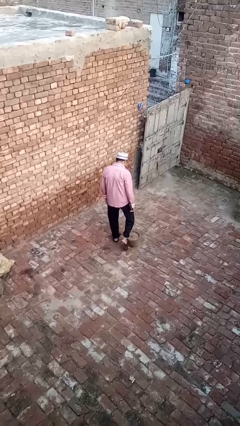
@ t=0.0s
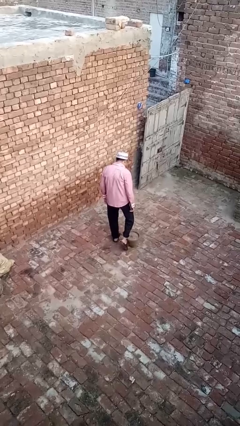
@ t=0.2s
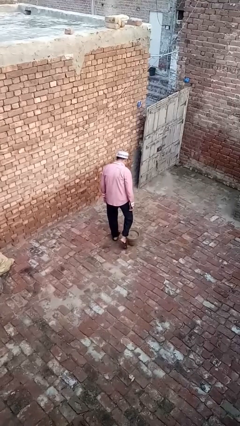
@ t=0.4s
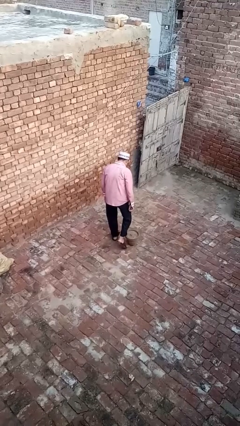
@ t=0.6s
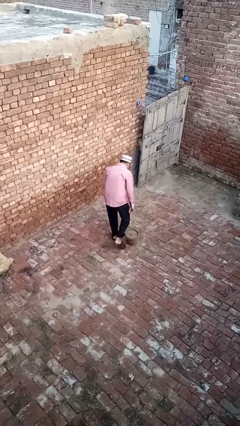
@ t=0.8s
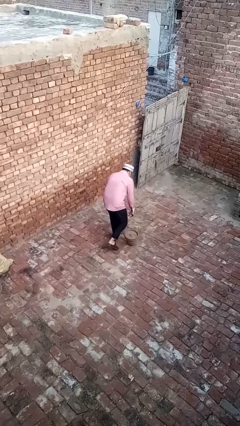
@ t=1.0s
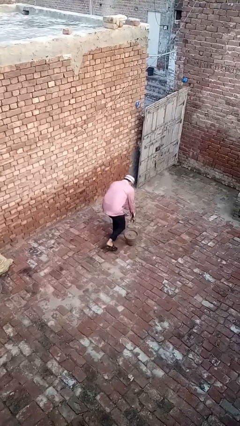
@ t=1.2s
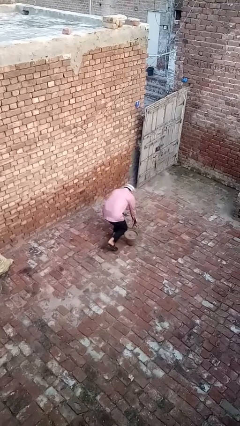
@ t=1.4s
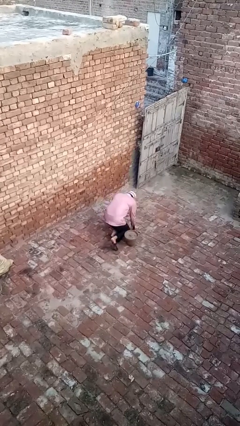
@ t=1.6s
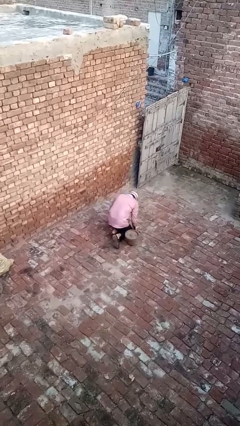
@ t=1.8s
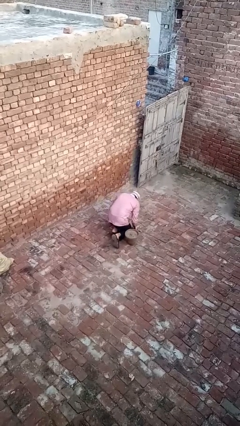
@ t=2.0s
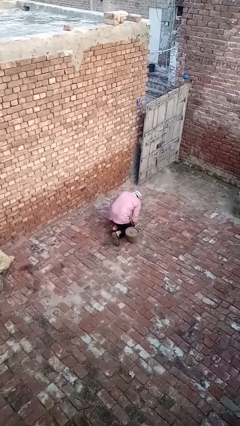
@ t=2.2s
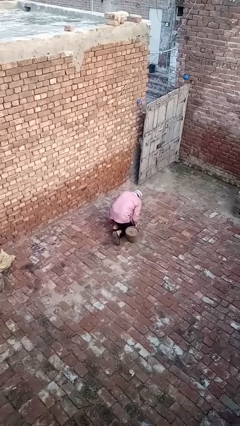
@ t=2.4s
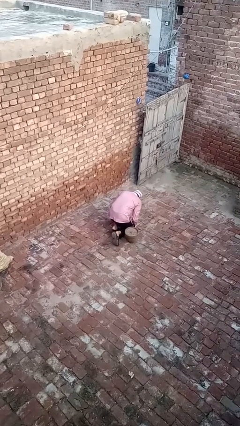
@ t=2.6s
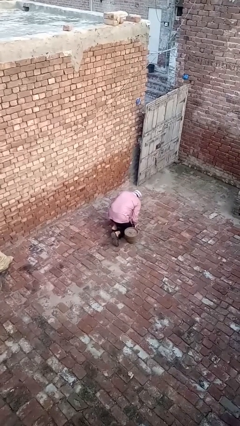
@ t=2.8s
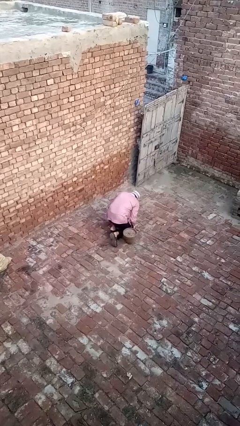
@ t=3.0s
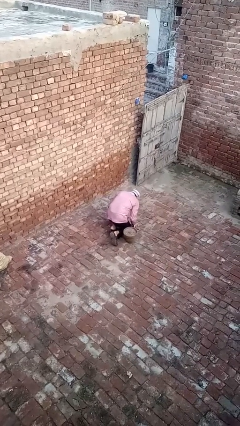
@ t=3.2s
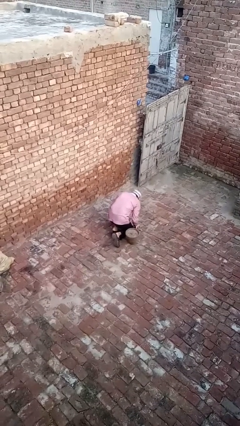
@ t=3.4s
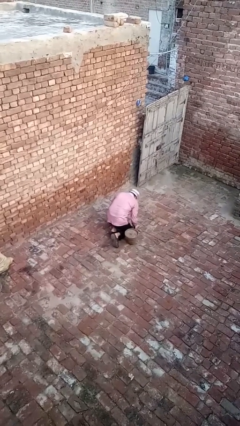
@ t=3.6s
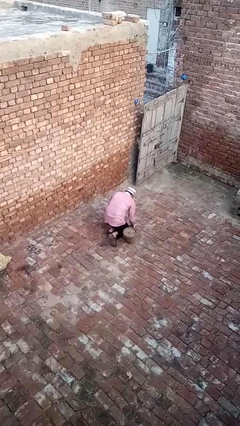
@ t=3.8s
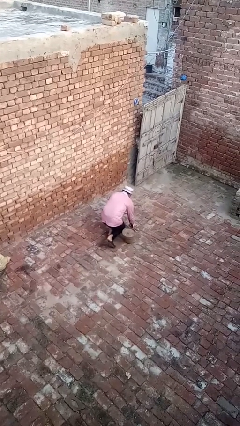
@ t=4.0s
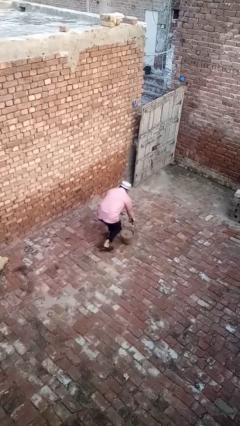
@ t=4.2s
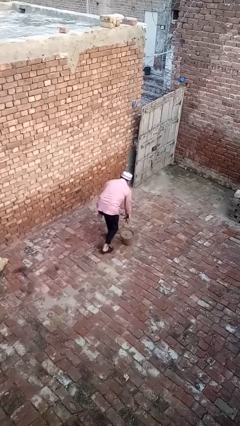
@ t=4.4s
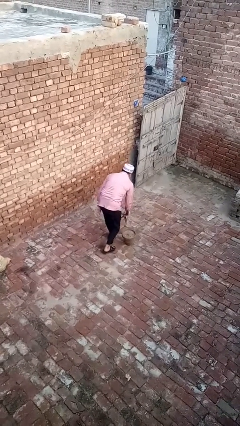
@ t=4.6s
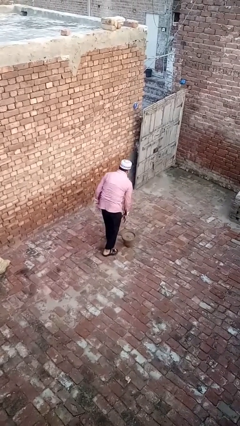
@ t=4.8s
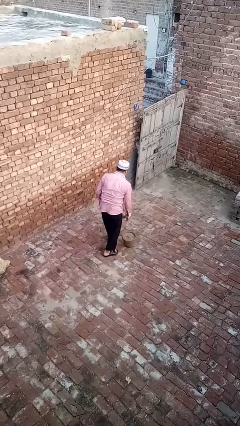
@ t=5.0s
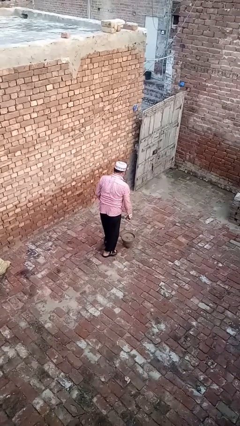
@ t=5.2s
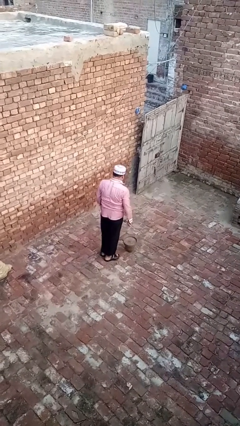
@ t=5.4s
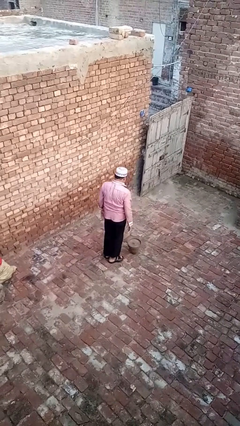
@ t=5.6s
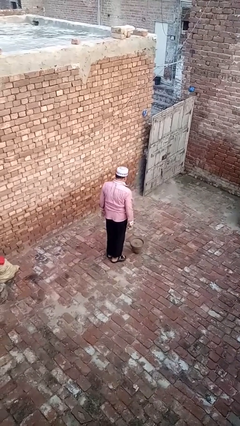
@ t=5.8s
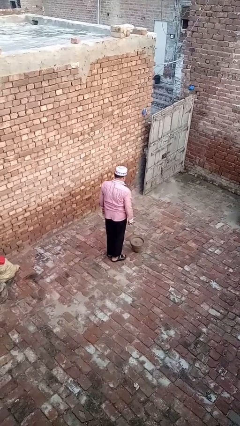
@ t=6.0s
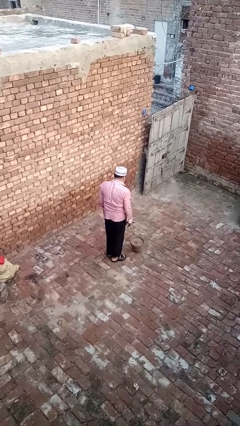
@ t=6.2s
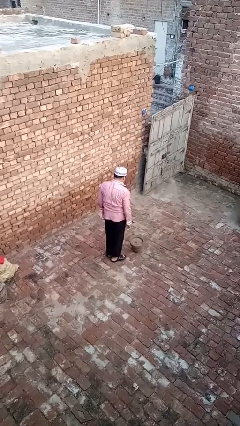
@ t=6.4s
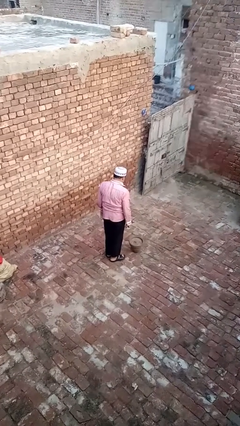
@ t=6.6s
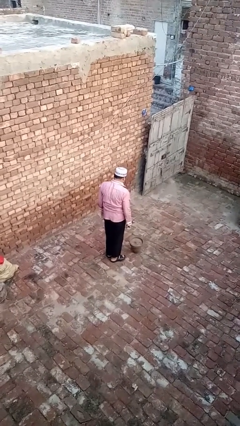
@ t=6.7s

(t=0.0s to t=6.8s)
person lies down on floor

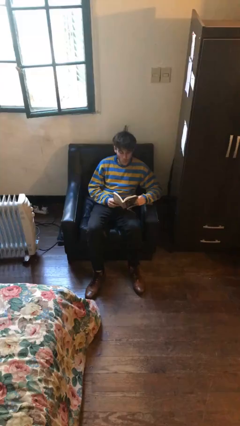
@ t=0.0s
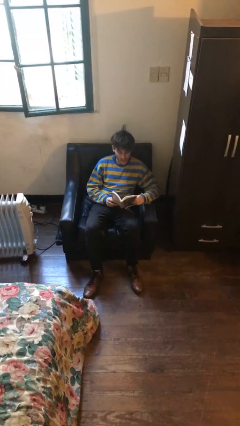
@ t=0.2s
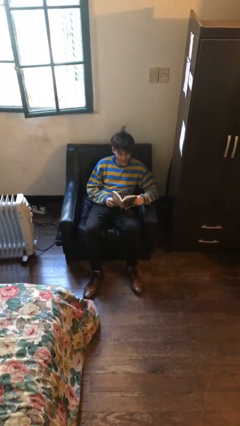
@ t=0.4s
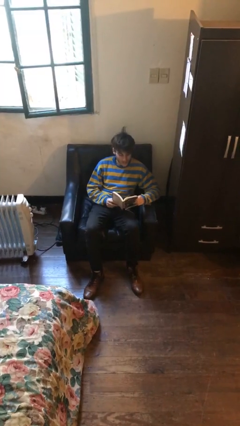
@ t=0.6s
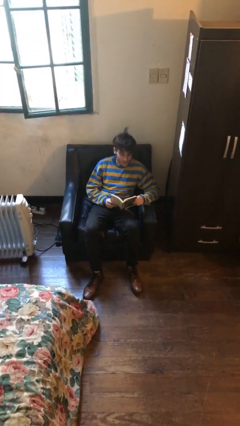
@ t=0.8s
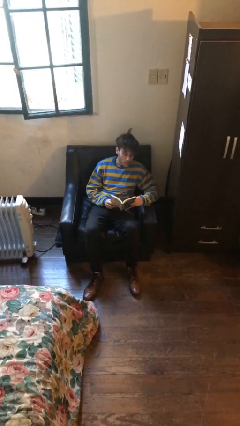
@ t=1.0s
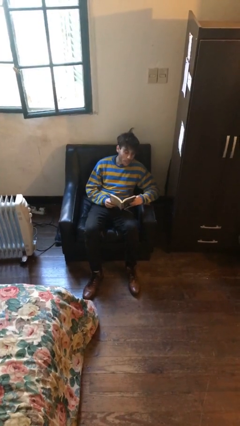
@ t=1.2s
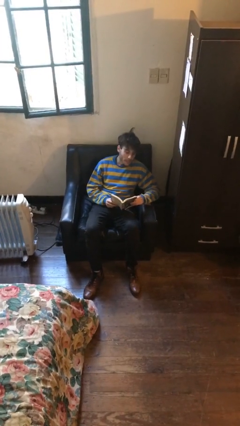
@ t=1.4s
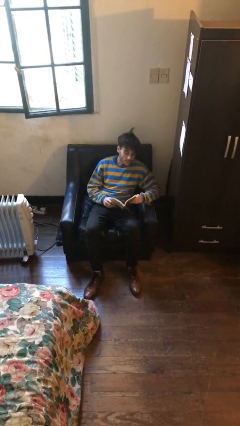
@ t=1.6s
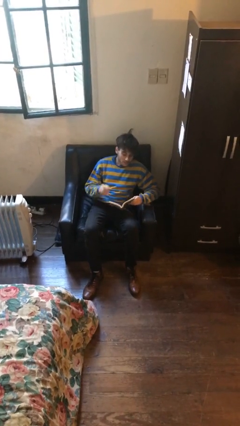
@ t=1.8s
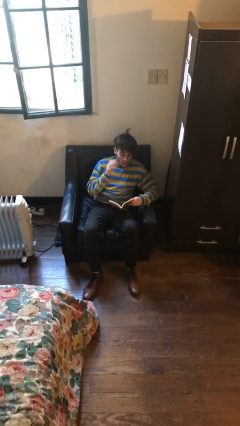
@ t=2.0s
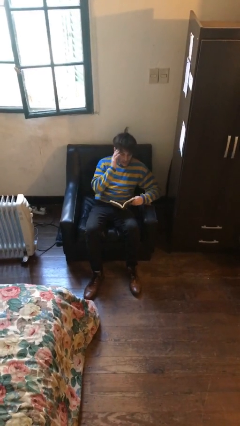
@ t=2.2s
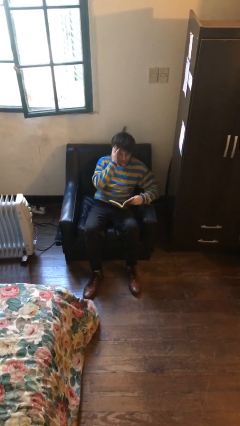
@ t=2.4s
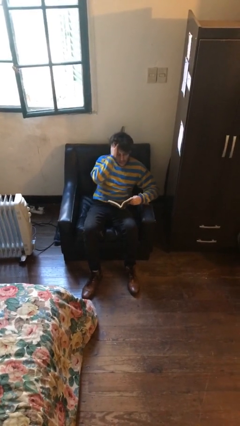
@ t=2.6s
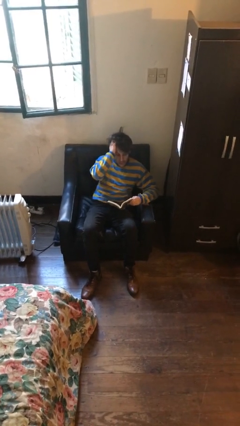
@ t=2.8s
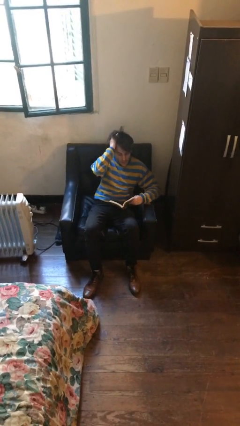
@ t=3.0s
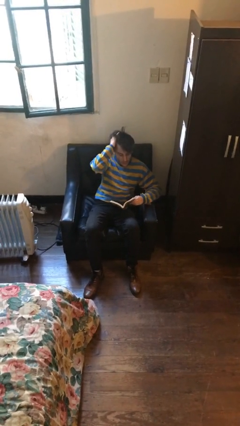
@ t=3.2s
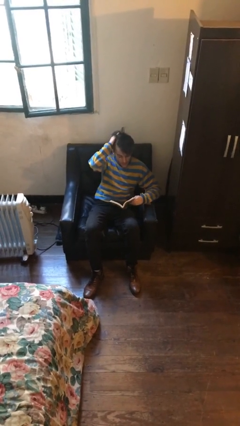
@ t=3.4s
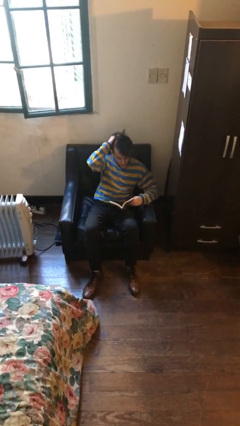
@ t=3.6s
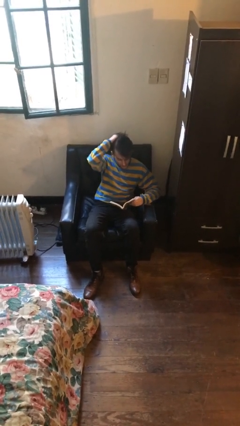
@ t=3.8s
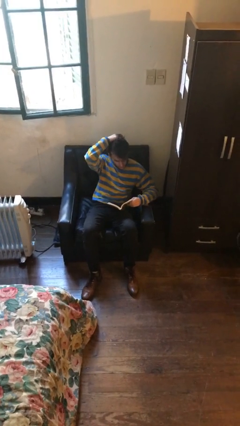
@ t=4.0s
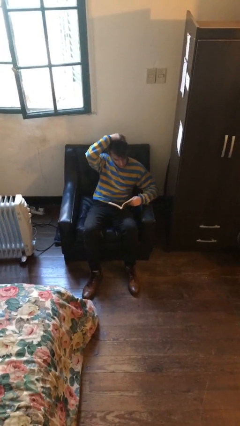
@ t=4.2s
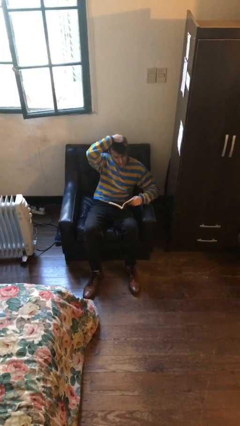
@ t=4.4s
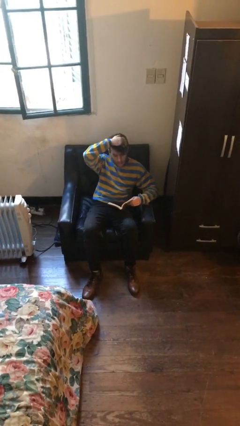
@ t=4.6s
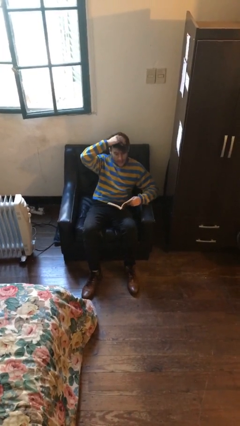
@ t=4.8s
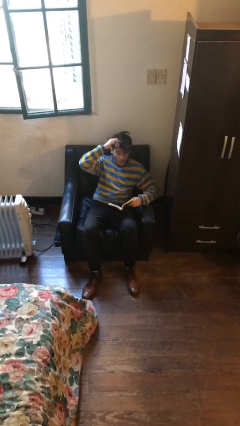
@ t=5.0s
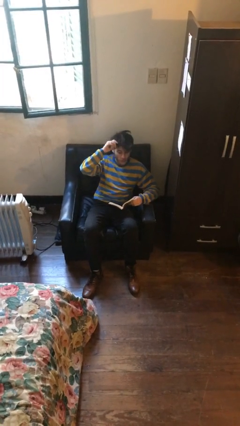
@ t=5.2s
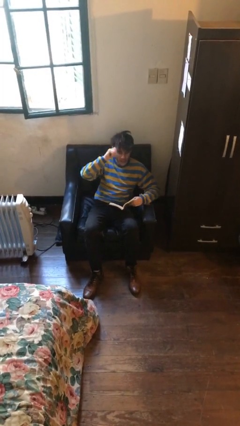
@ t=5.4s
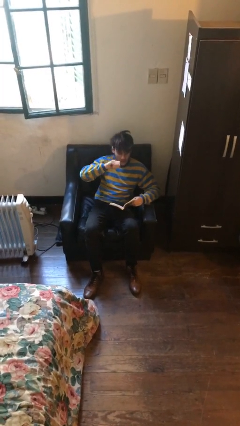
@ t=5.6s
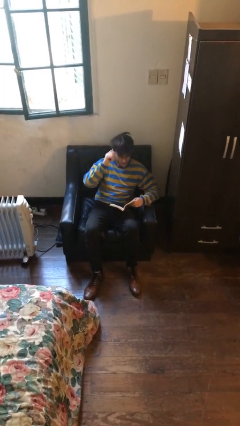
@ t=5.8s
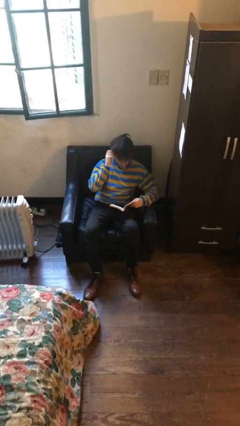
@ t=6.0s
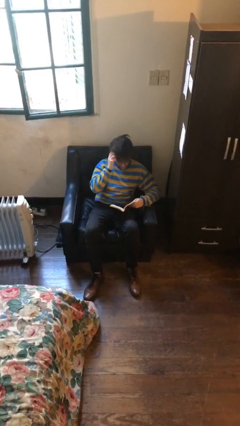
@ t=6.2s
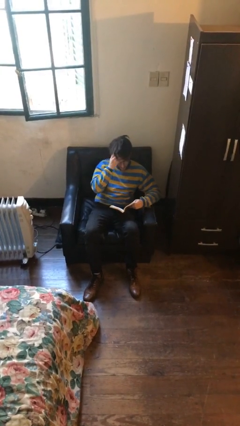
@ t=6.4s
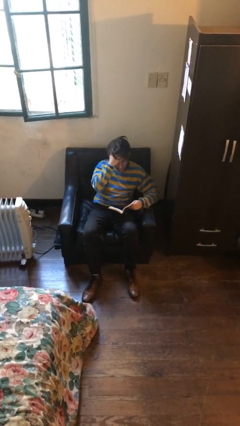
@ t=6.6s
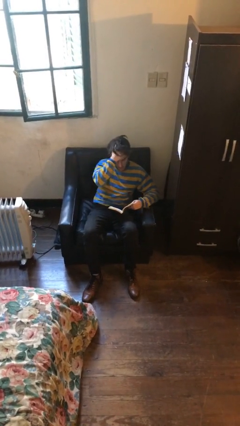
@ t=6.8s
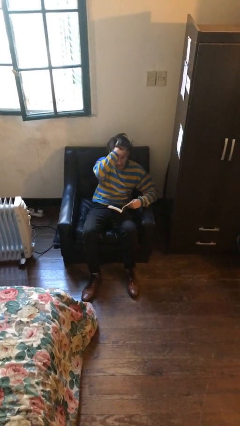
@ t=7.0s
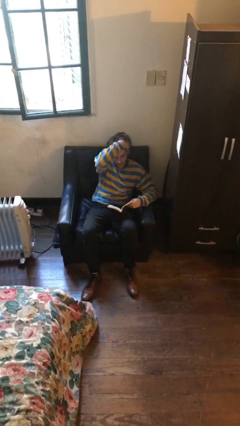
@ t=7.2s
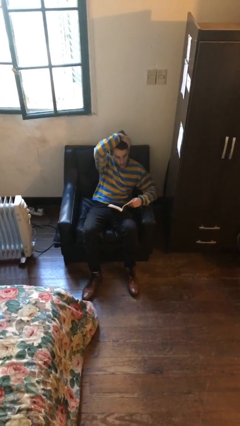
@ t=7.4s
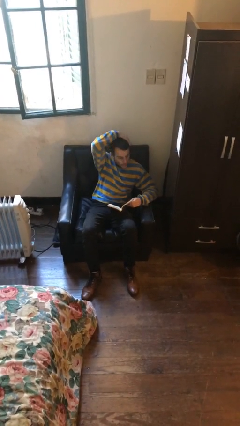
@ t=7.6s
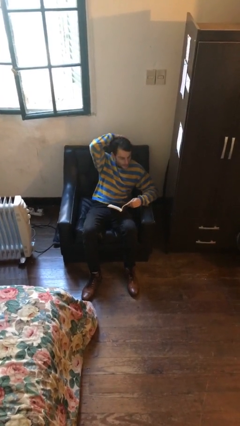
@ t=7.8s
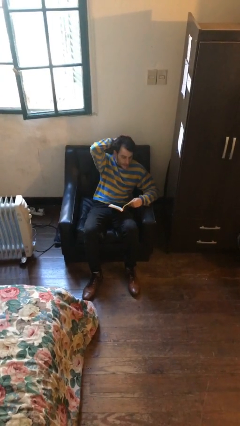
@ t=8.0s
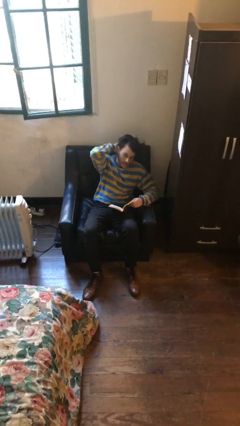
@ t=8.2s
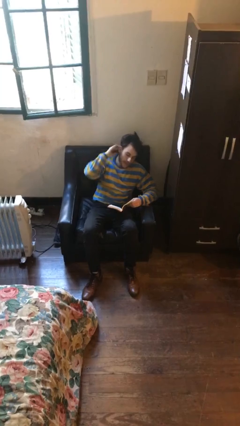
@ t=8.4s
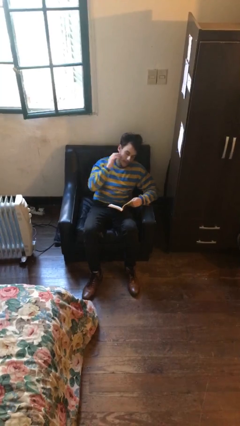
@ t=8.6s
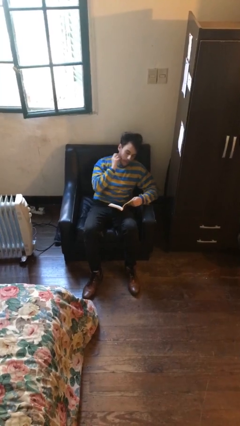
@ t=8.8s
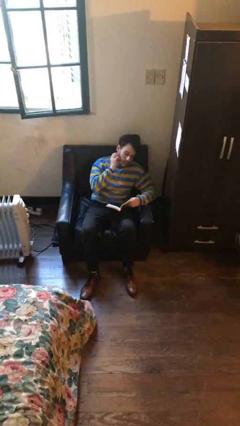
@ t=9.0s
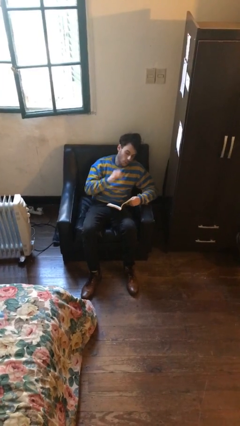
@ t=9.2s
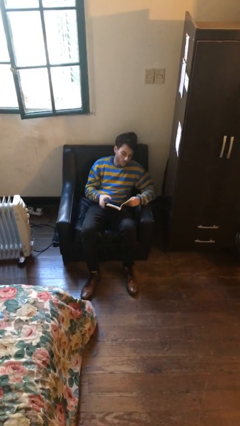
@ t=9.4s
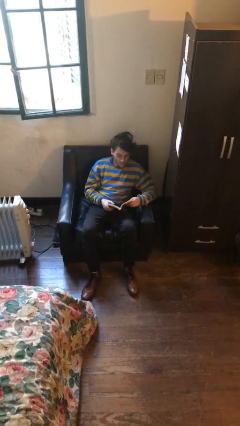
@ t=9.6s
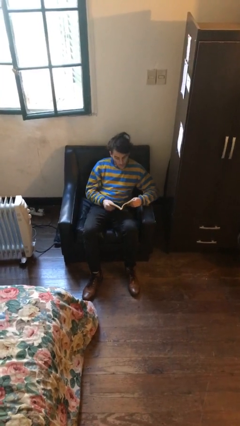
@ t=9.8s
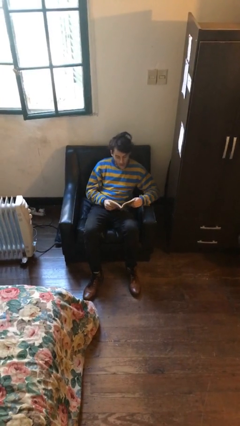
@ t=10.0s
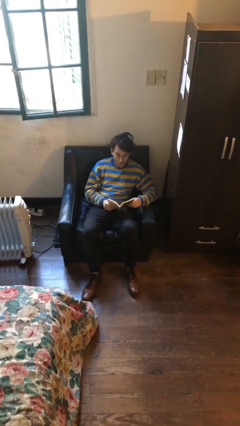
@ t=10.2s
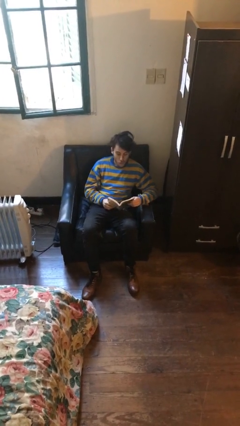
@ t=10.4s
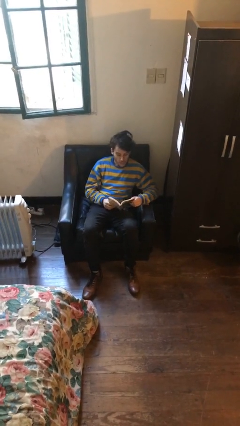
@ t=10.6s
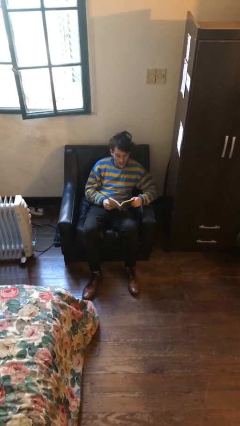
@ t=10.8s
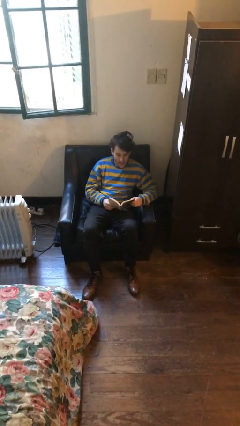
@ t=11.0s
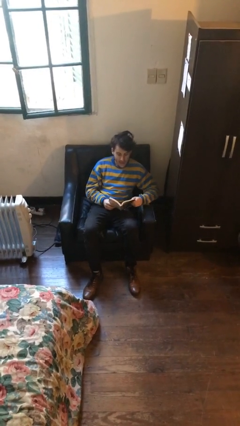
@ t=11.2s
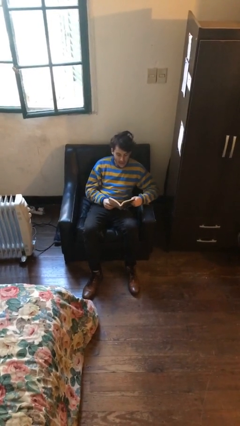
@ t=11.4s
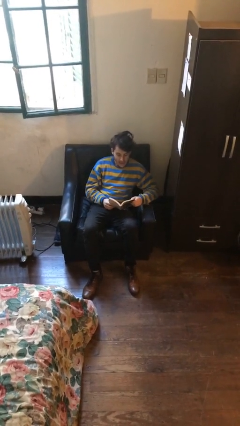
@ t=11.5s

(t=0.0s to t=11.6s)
person reads document
